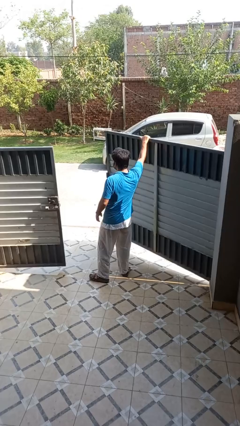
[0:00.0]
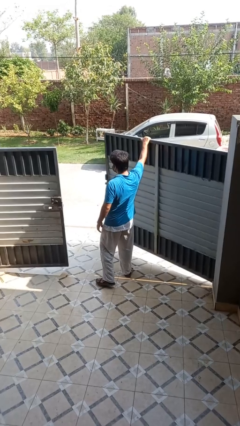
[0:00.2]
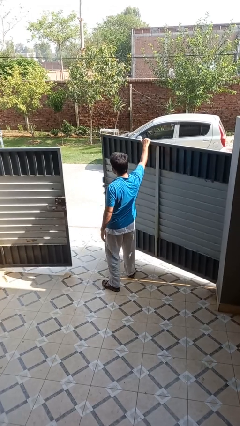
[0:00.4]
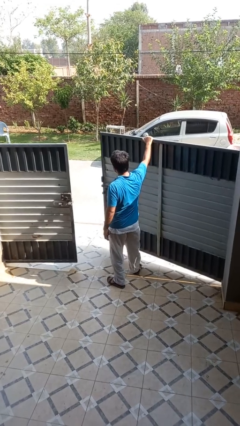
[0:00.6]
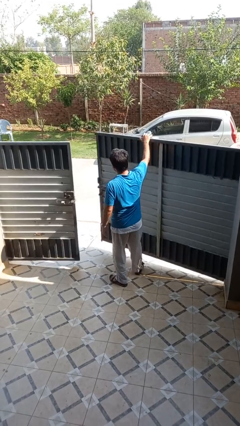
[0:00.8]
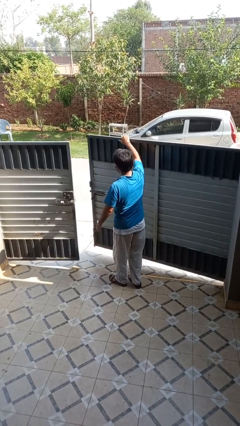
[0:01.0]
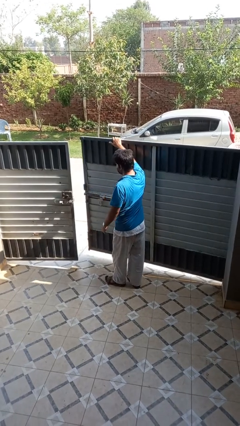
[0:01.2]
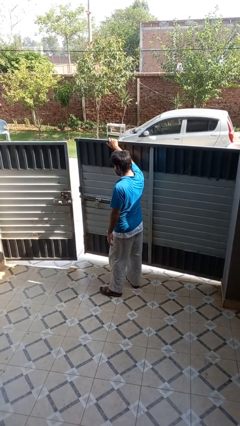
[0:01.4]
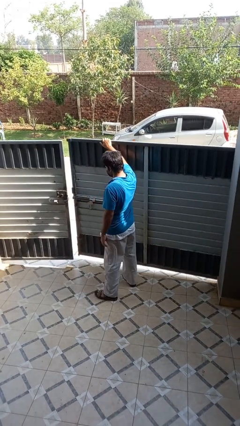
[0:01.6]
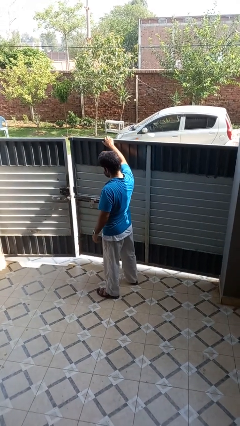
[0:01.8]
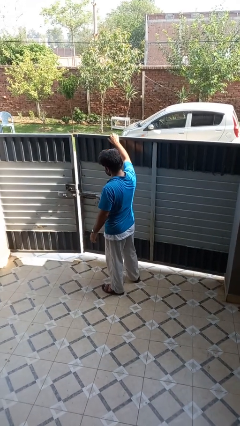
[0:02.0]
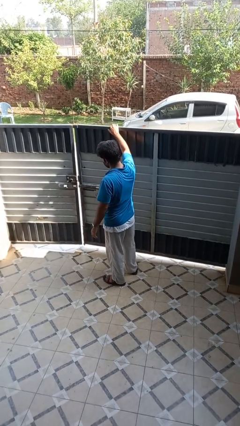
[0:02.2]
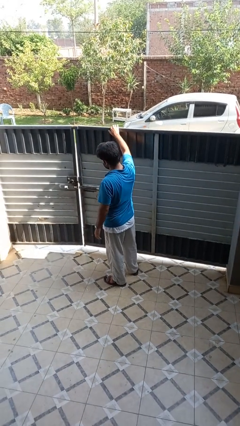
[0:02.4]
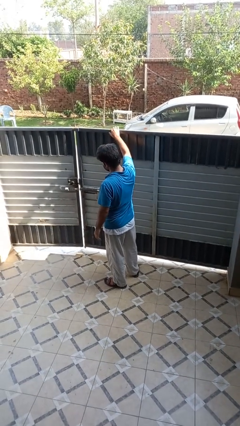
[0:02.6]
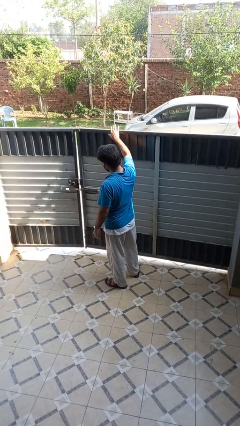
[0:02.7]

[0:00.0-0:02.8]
person closes gate

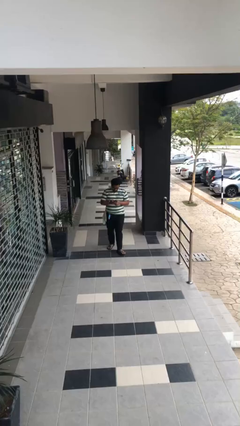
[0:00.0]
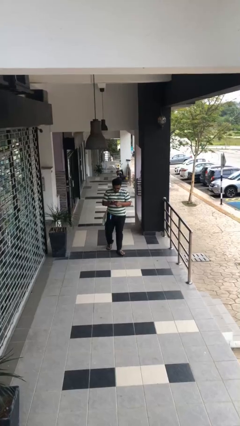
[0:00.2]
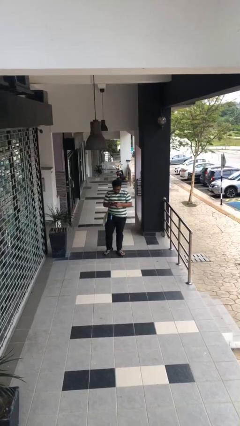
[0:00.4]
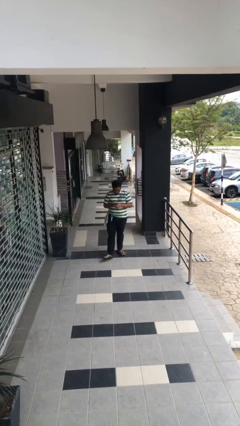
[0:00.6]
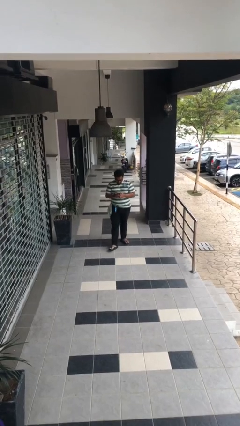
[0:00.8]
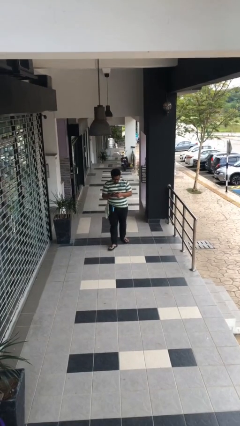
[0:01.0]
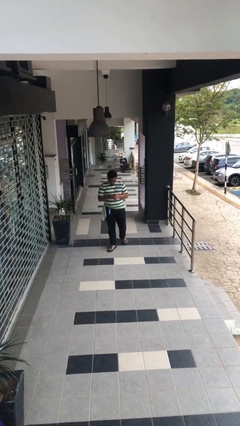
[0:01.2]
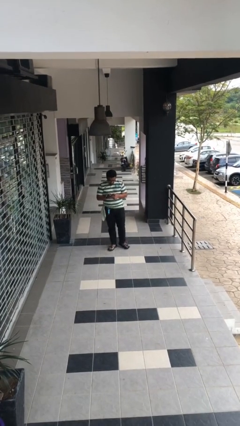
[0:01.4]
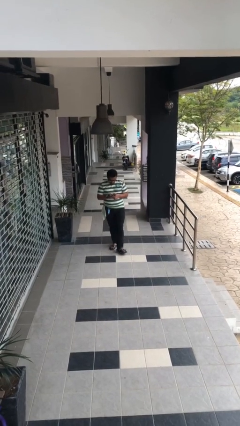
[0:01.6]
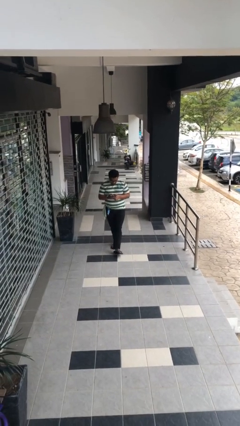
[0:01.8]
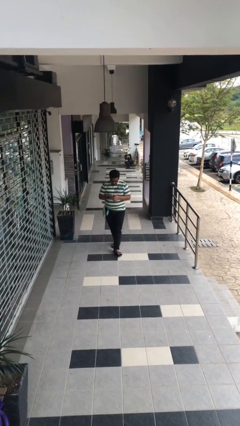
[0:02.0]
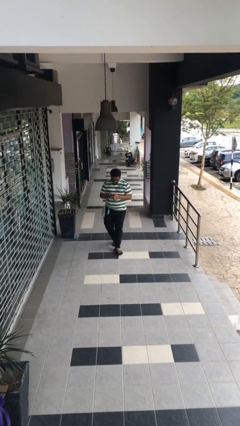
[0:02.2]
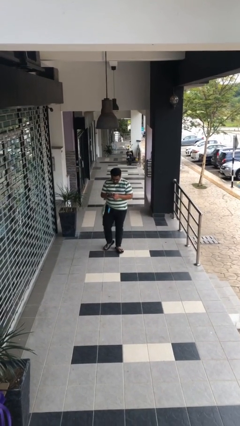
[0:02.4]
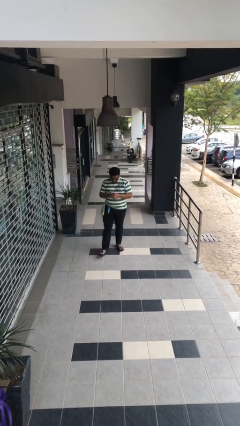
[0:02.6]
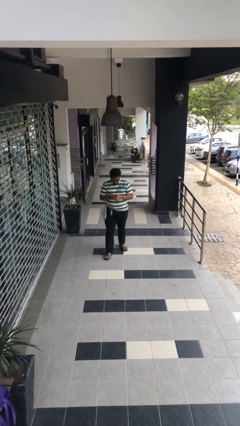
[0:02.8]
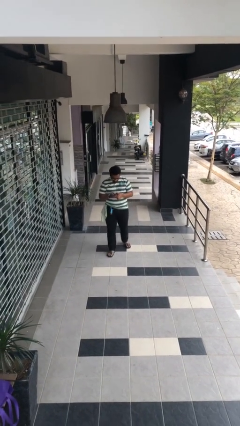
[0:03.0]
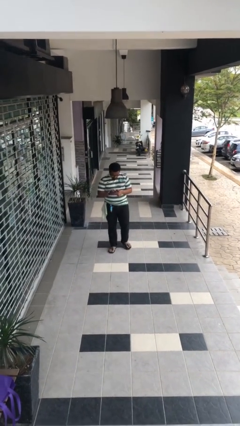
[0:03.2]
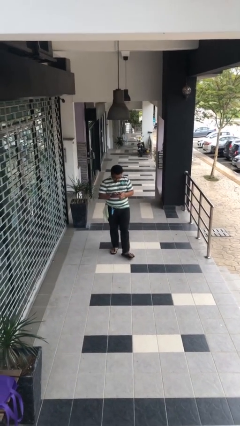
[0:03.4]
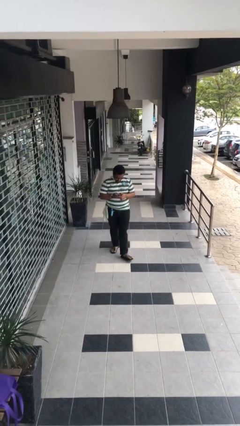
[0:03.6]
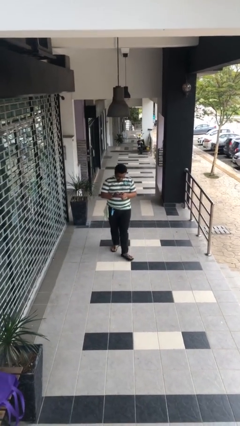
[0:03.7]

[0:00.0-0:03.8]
person texts on phone

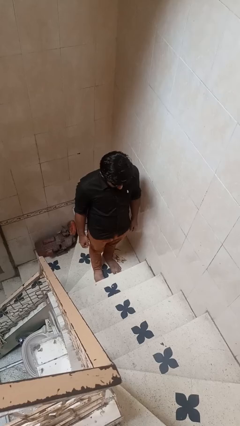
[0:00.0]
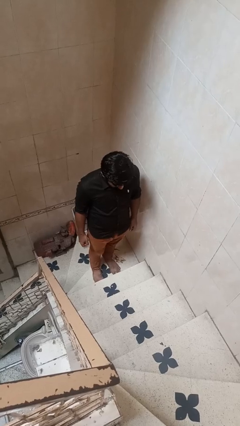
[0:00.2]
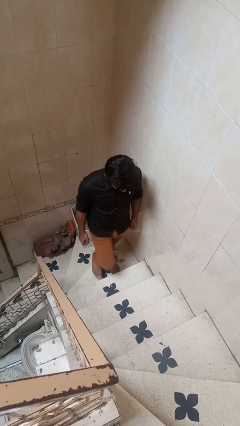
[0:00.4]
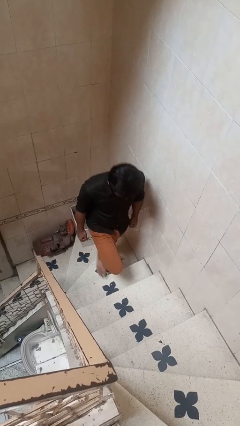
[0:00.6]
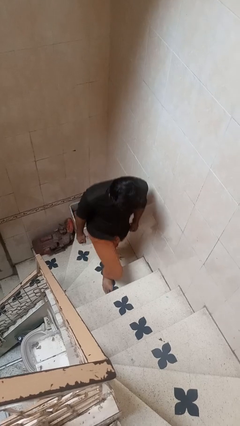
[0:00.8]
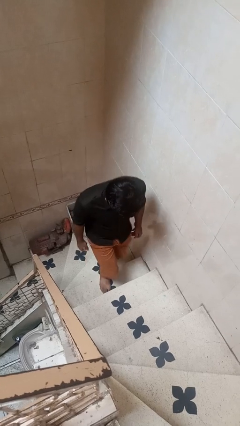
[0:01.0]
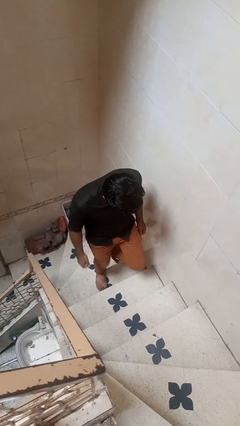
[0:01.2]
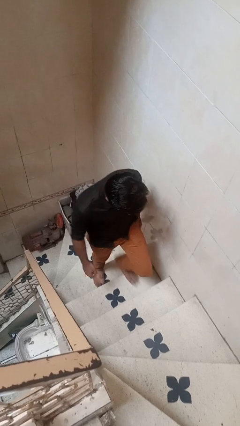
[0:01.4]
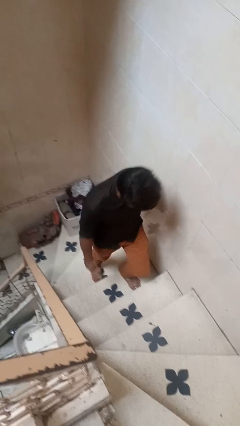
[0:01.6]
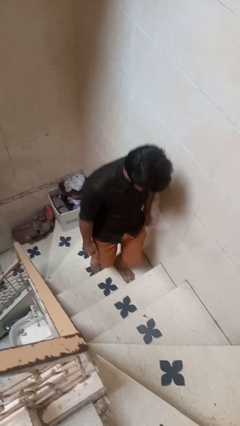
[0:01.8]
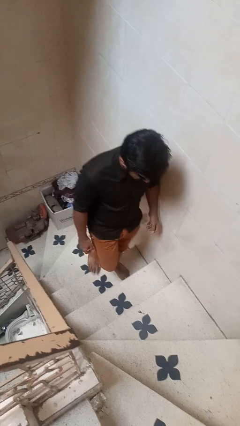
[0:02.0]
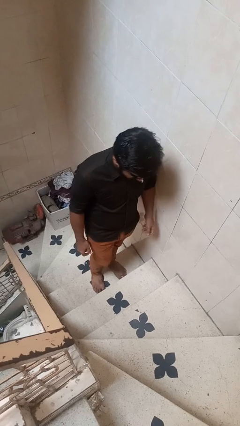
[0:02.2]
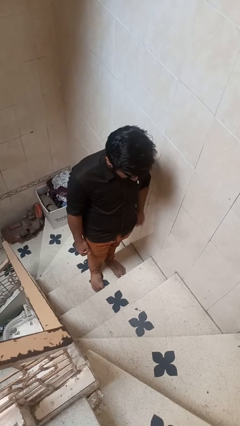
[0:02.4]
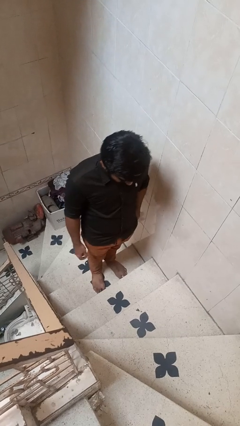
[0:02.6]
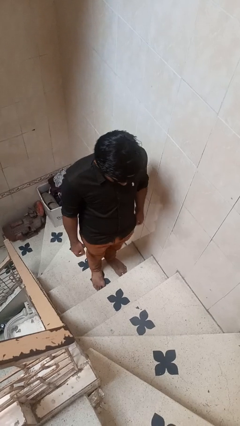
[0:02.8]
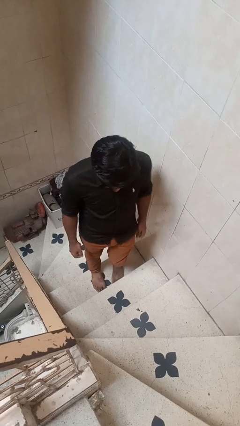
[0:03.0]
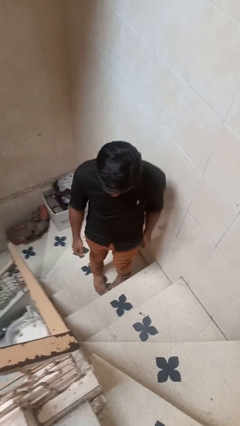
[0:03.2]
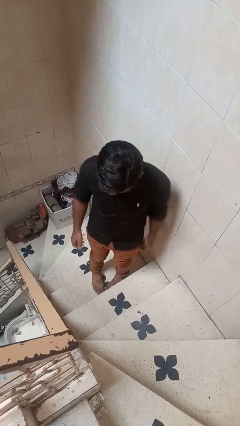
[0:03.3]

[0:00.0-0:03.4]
person climbs up stairs

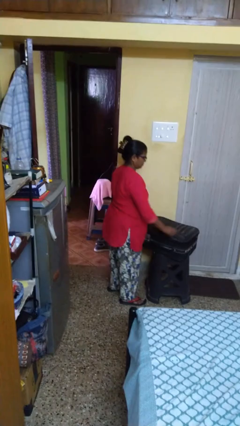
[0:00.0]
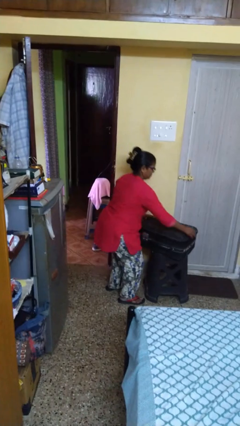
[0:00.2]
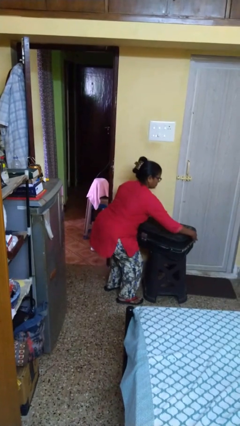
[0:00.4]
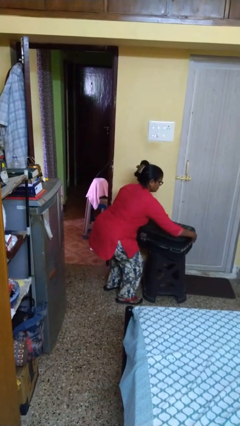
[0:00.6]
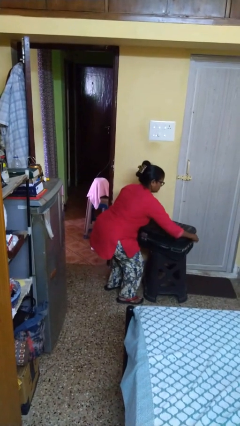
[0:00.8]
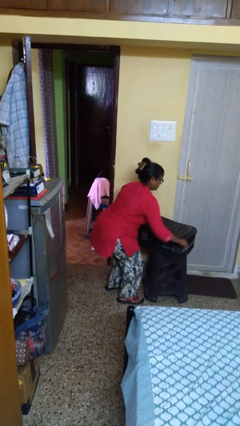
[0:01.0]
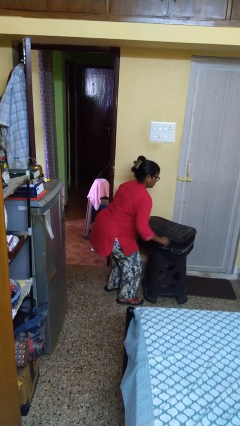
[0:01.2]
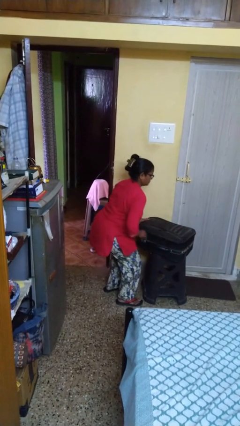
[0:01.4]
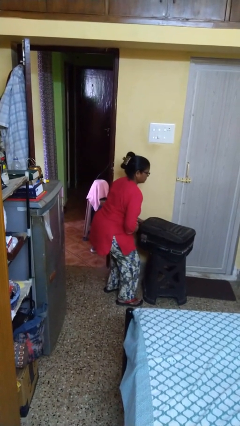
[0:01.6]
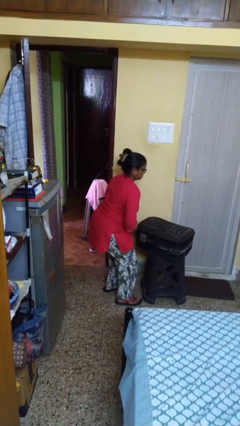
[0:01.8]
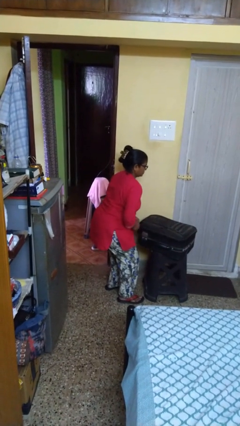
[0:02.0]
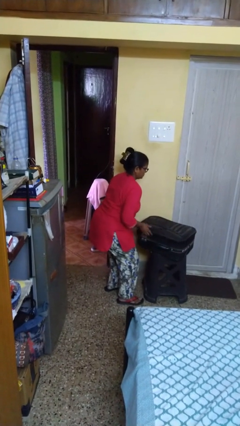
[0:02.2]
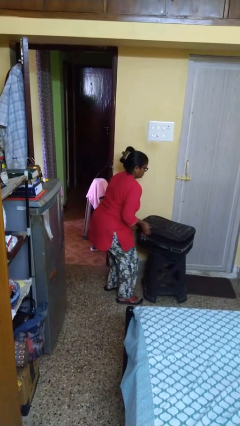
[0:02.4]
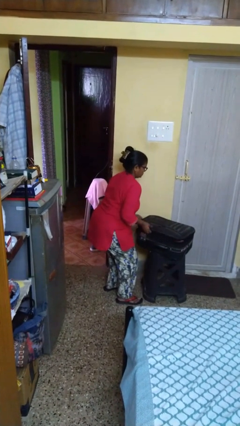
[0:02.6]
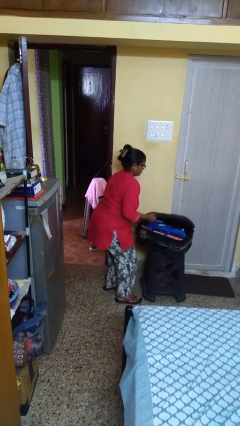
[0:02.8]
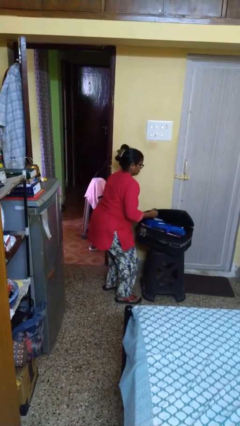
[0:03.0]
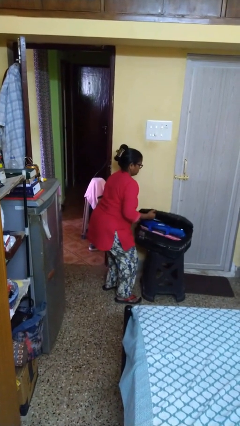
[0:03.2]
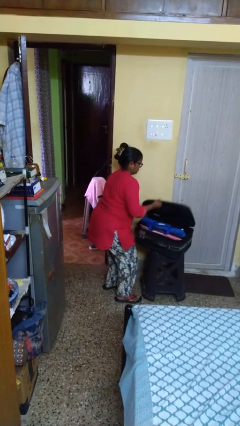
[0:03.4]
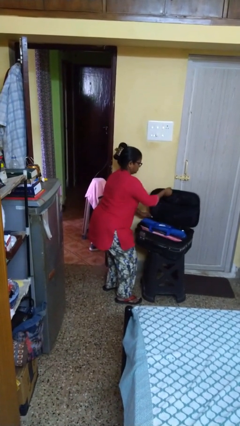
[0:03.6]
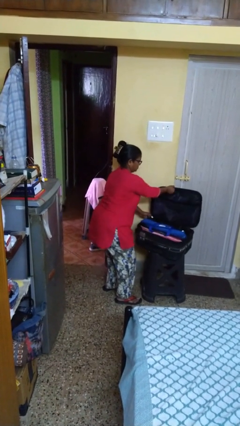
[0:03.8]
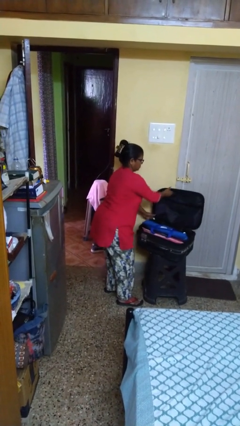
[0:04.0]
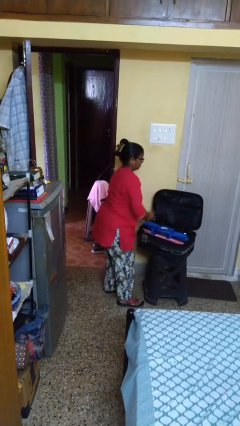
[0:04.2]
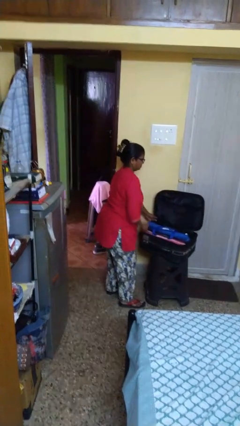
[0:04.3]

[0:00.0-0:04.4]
person opens suitcase

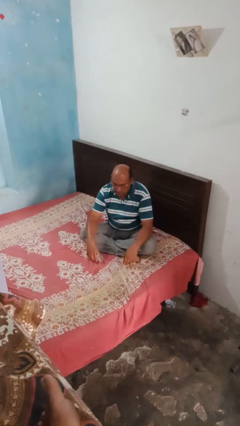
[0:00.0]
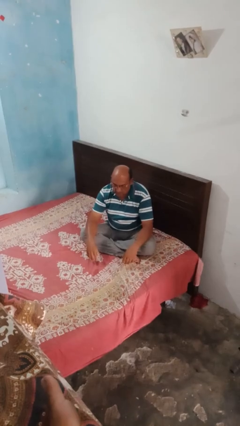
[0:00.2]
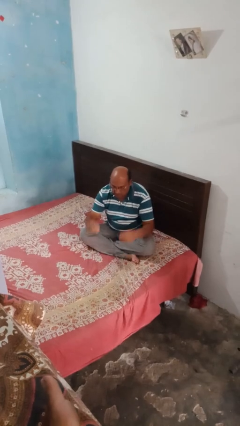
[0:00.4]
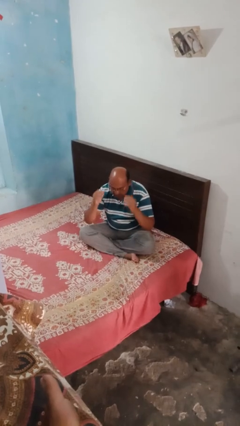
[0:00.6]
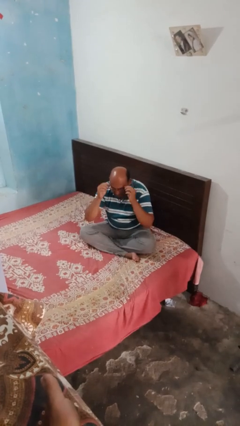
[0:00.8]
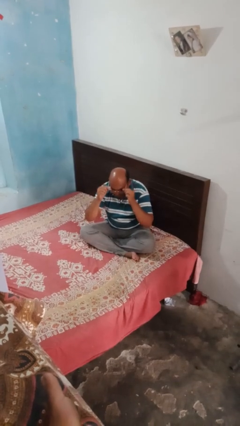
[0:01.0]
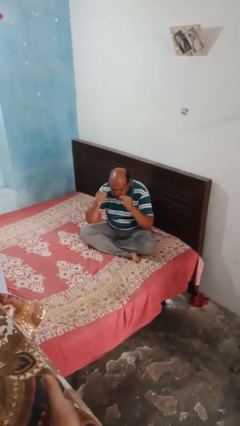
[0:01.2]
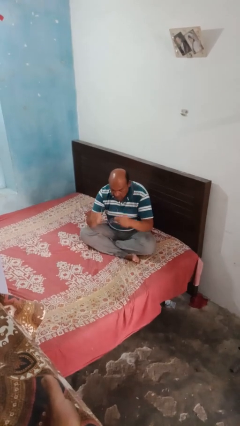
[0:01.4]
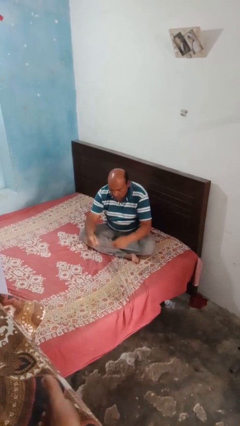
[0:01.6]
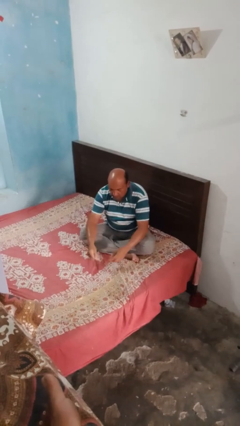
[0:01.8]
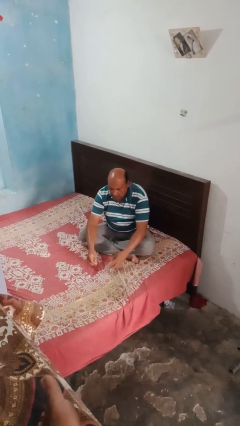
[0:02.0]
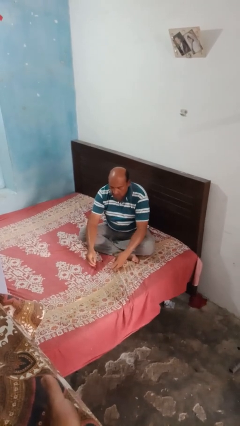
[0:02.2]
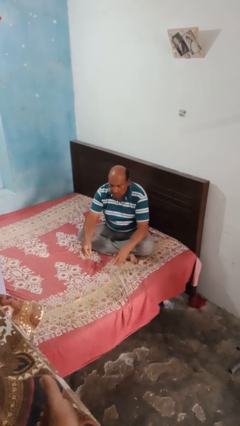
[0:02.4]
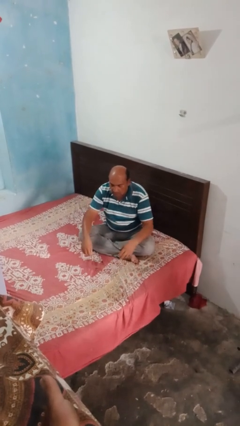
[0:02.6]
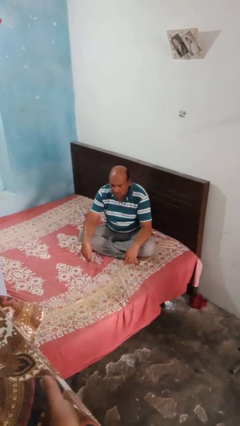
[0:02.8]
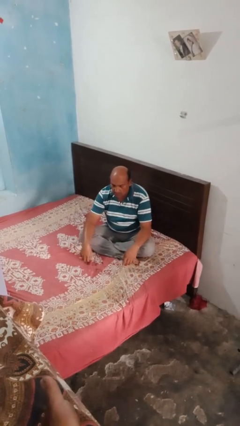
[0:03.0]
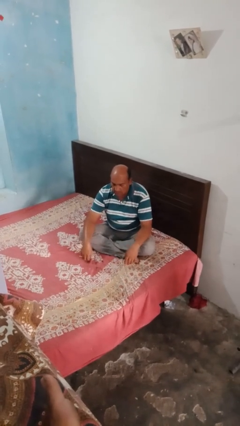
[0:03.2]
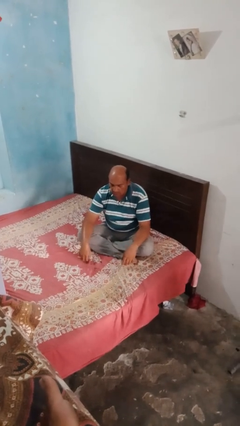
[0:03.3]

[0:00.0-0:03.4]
person takes off glasses
